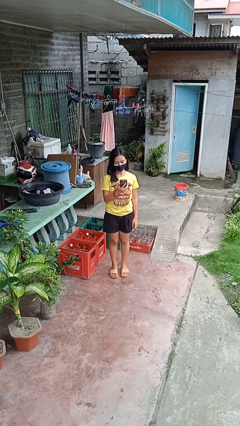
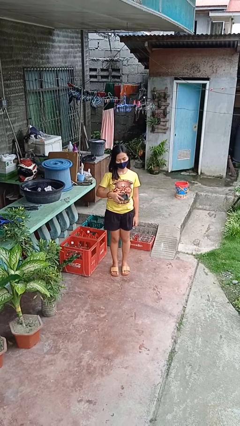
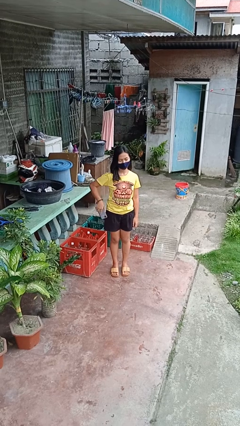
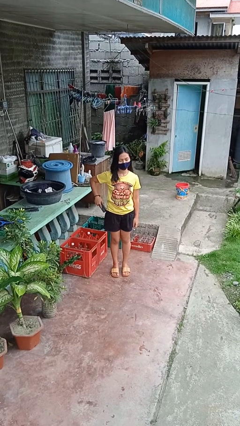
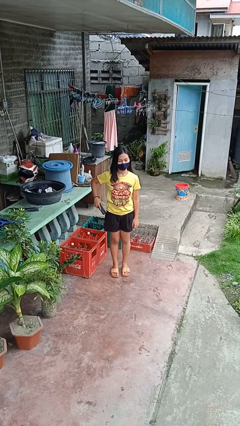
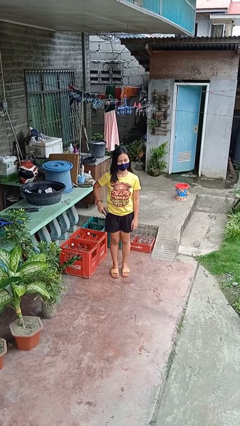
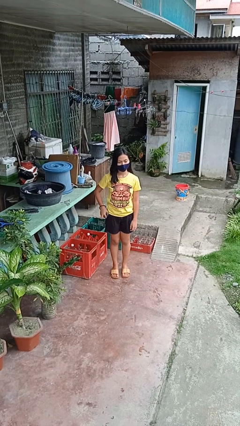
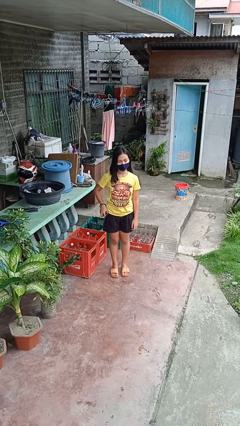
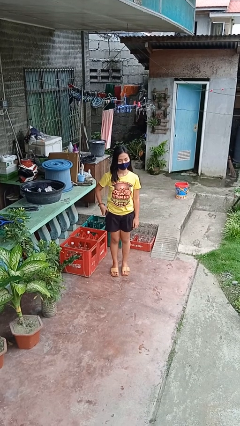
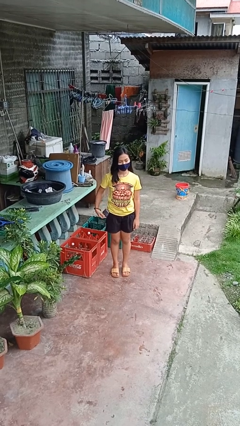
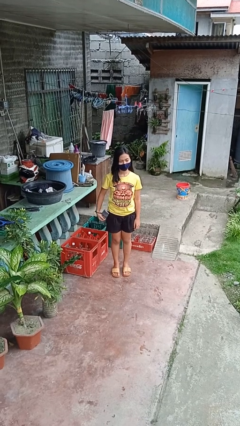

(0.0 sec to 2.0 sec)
person puts phone into pocket

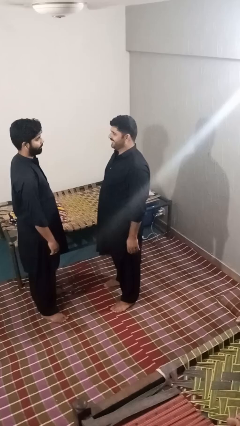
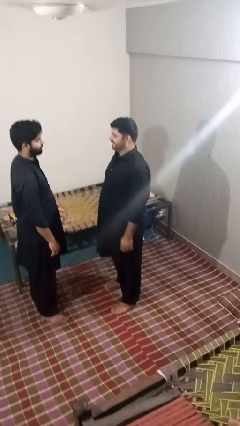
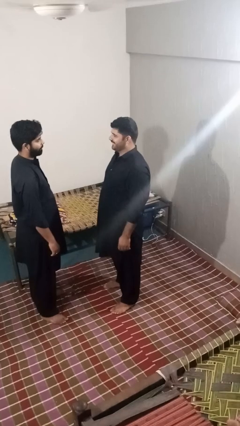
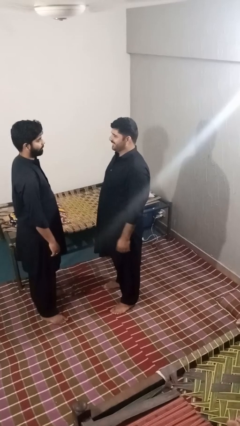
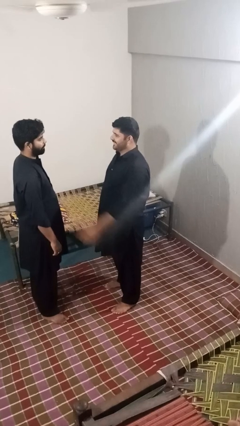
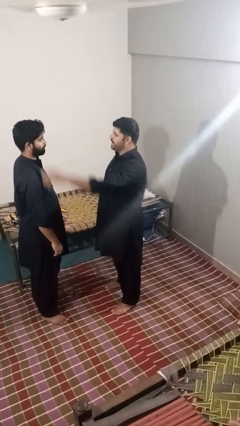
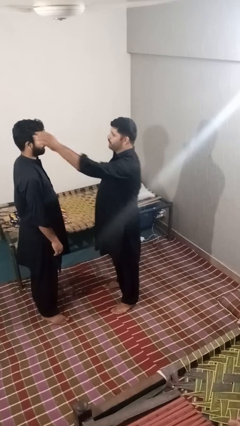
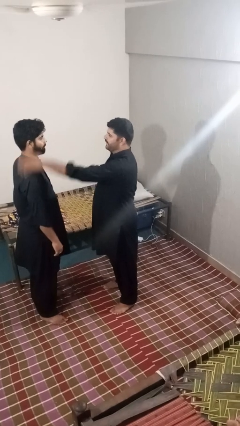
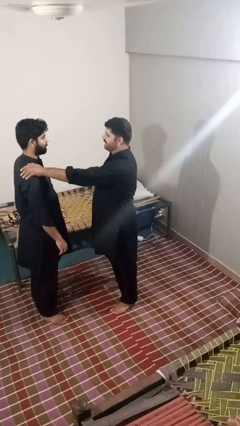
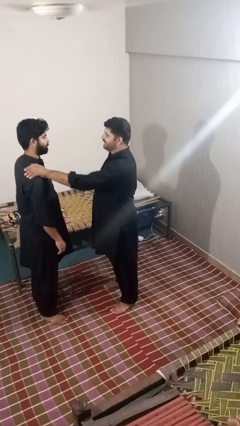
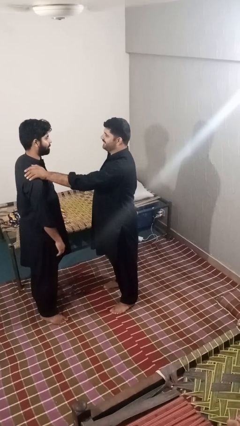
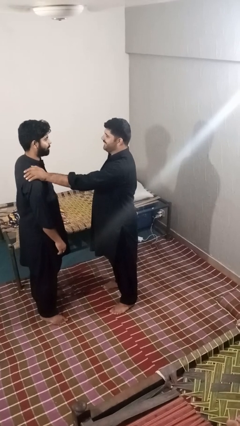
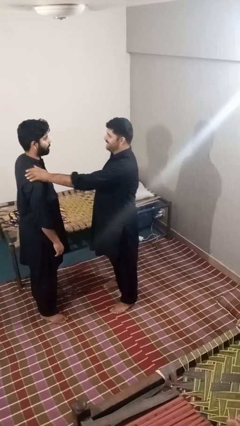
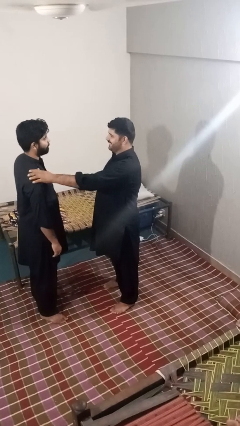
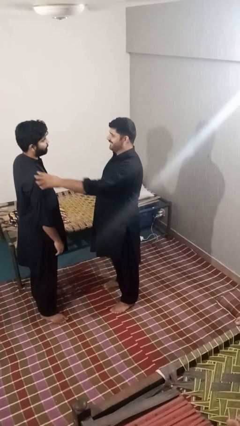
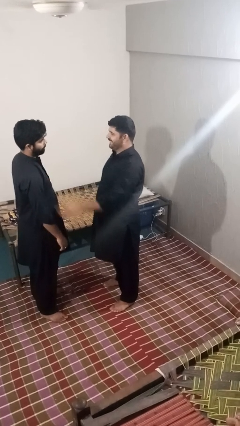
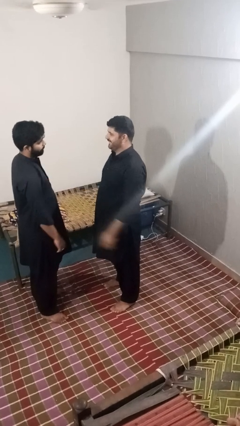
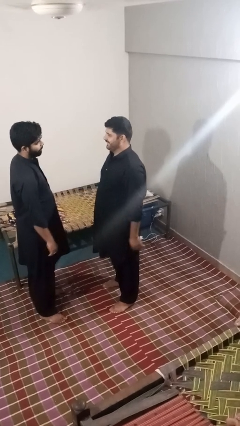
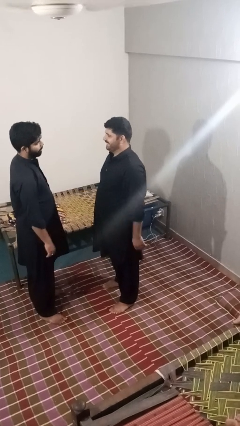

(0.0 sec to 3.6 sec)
person pounds shoulders of person

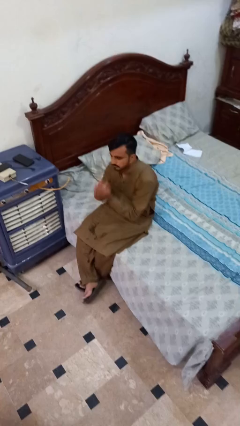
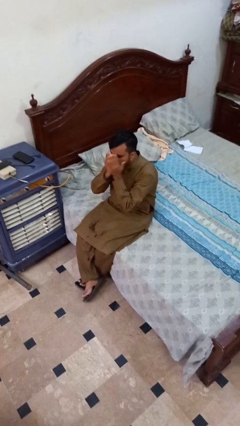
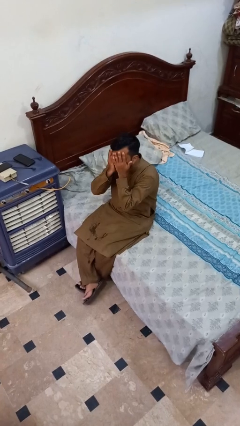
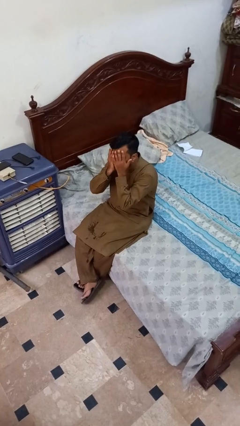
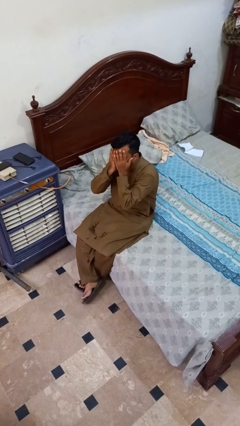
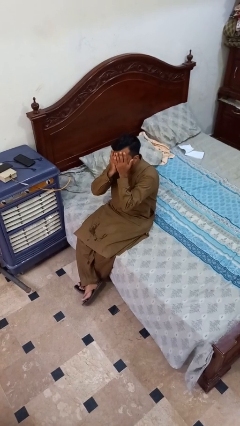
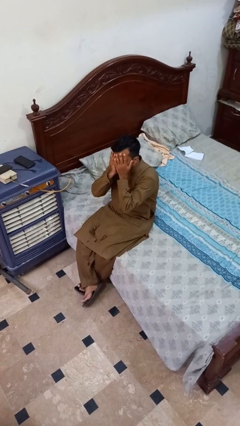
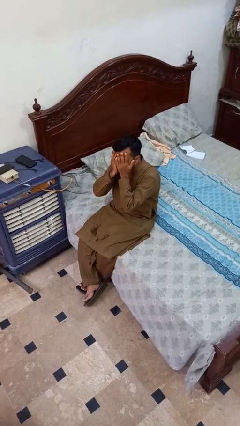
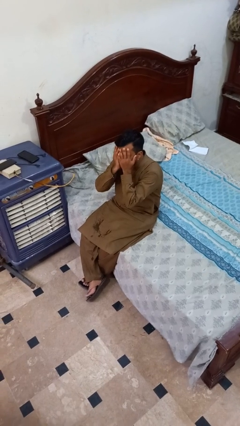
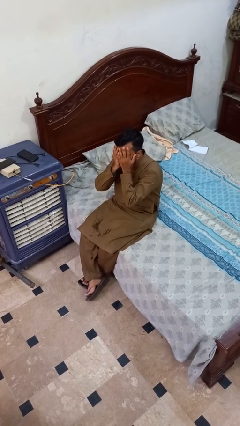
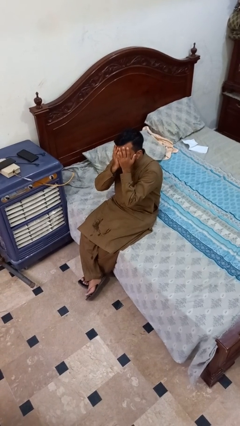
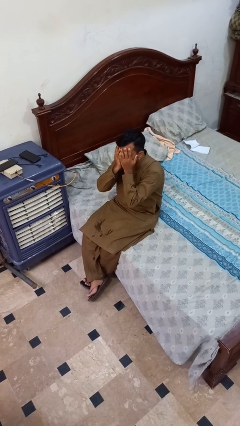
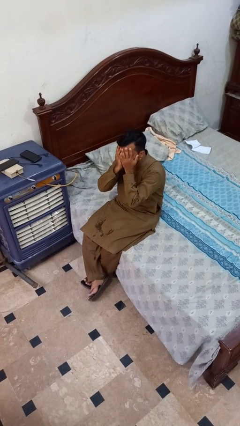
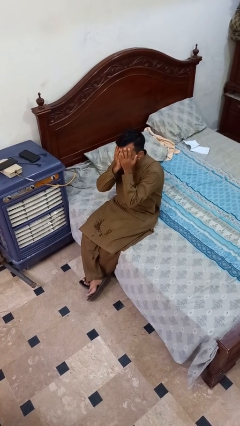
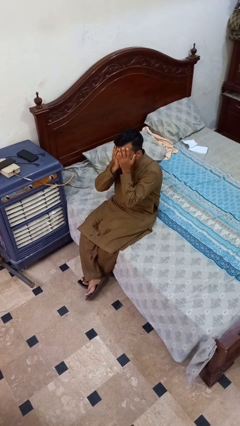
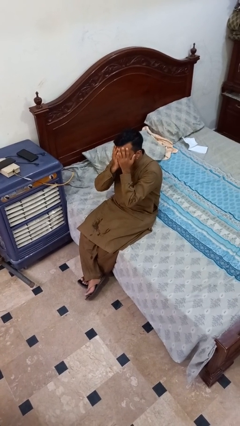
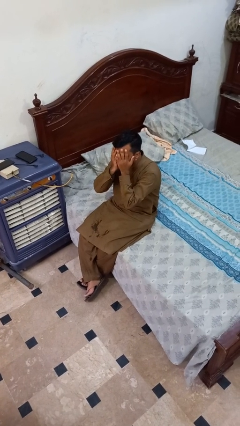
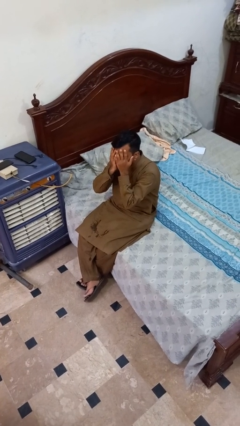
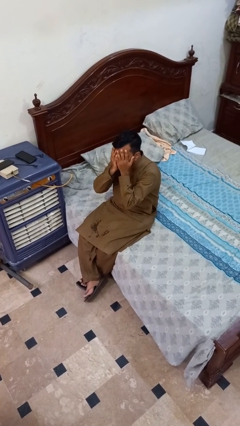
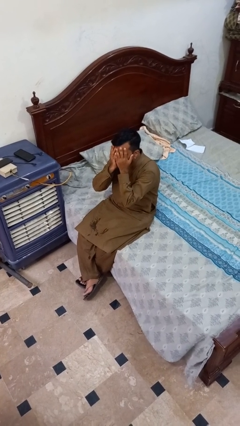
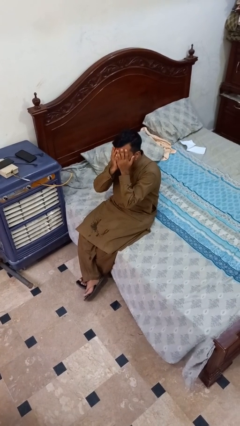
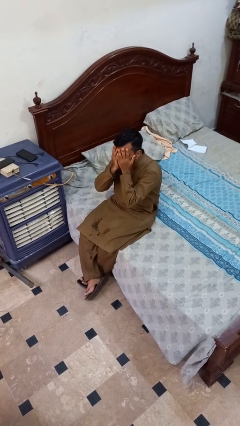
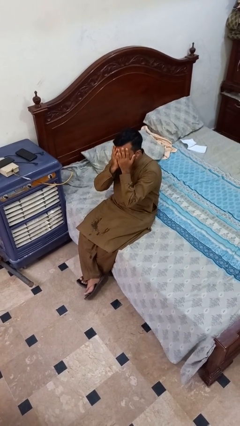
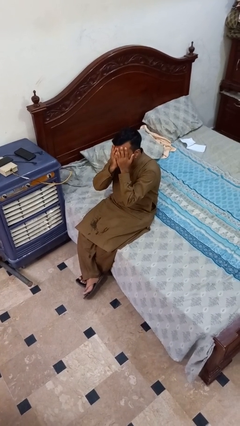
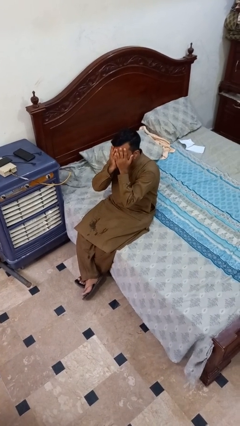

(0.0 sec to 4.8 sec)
person covers face with hands

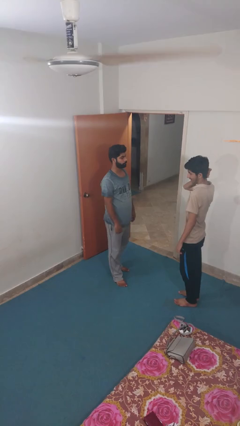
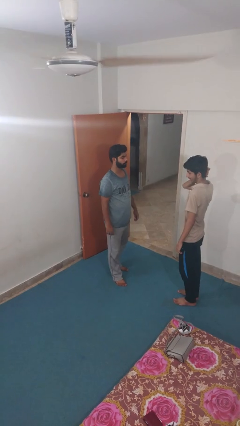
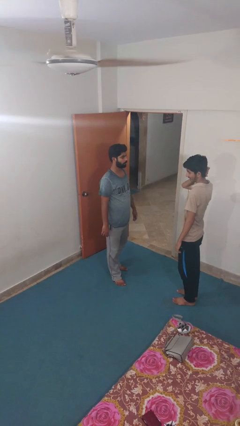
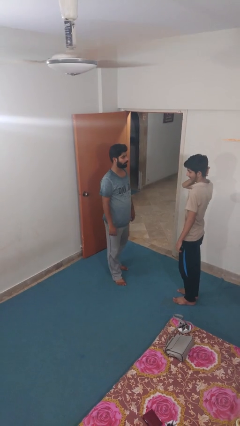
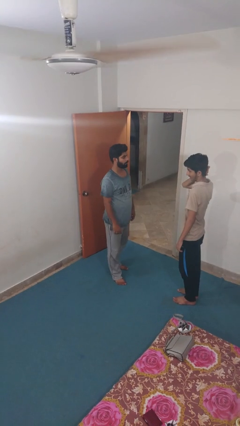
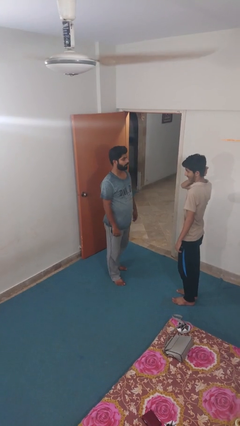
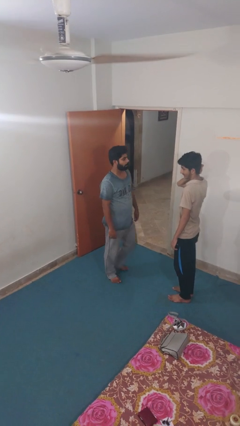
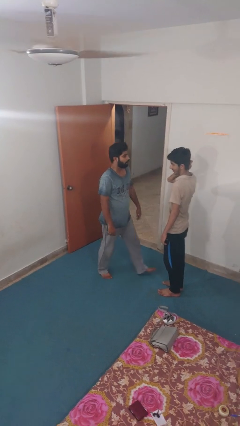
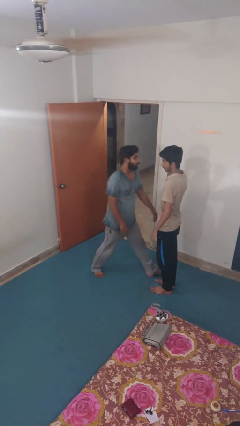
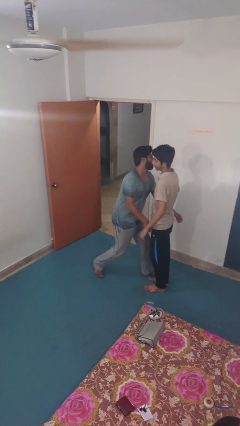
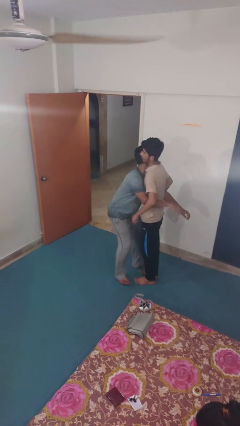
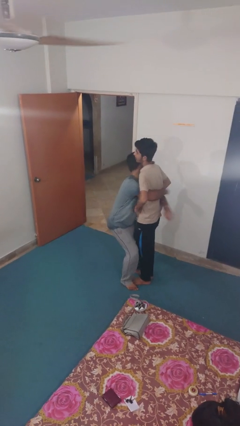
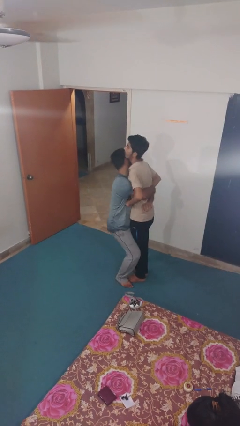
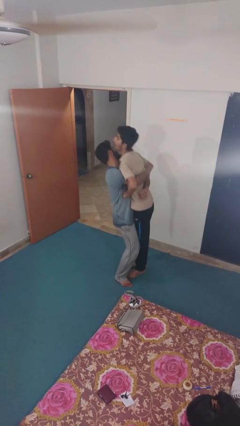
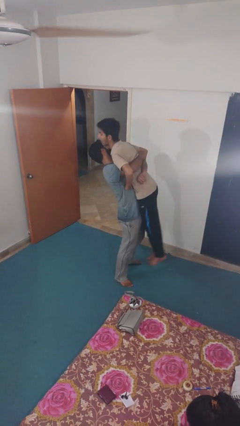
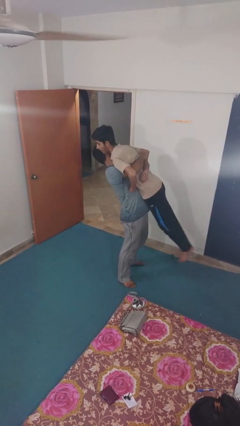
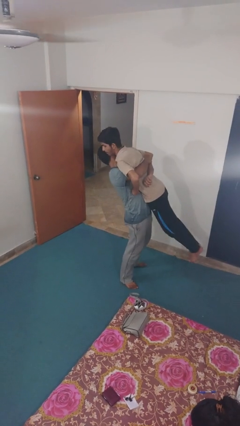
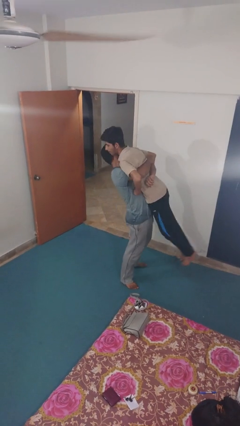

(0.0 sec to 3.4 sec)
person picks up person

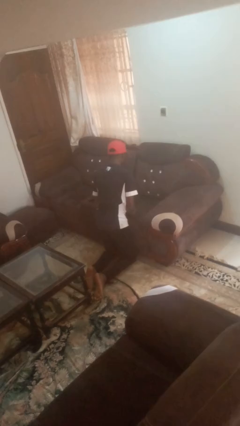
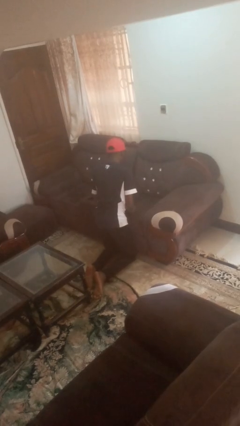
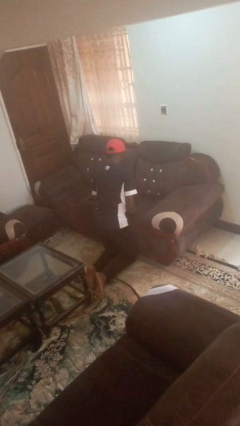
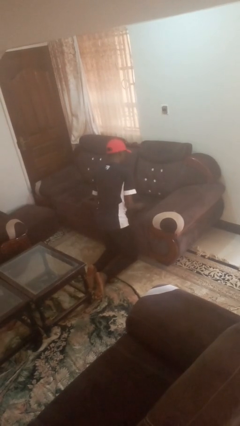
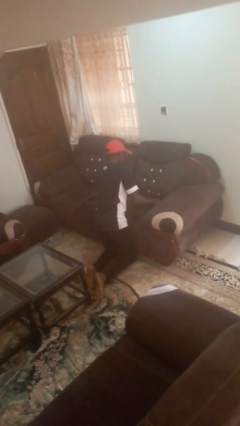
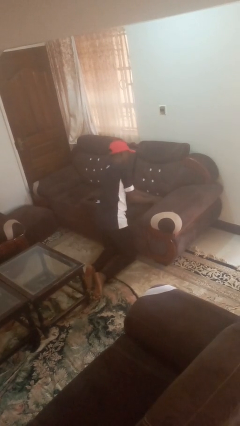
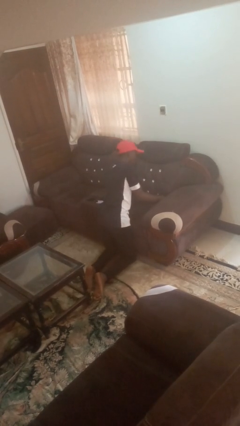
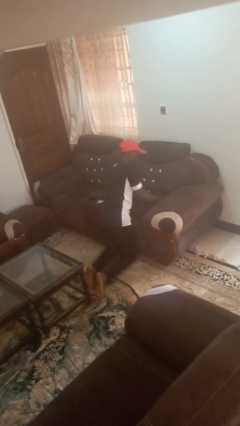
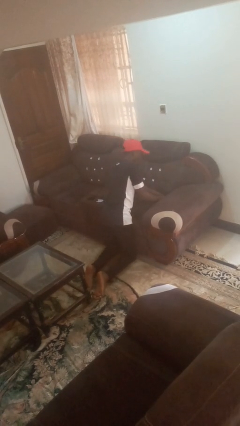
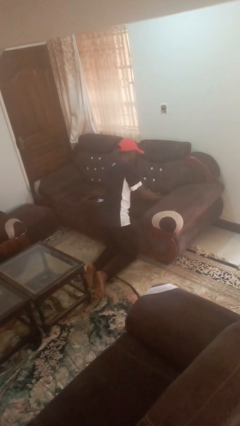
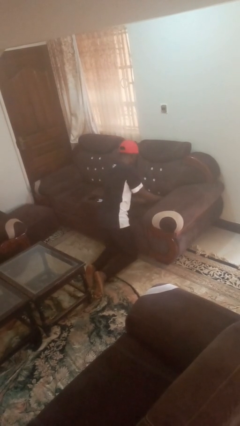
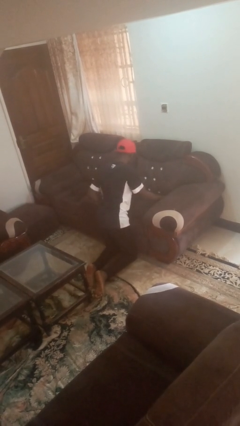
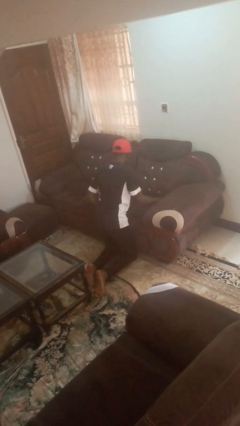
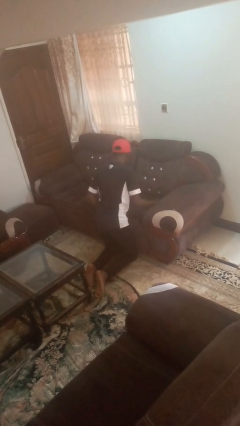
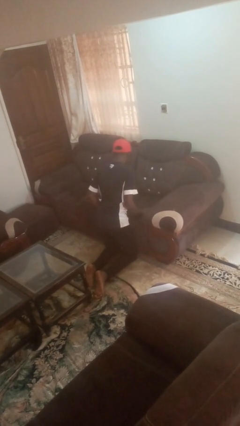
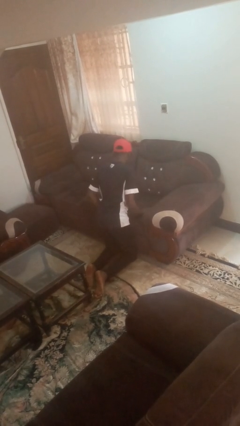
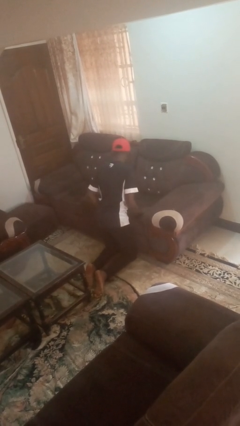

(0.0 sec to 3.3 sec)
person searches in couch

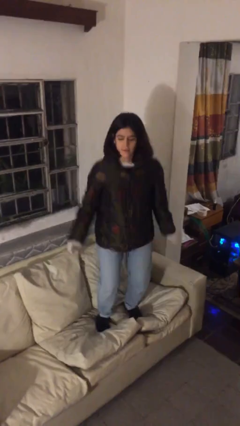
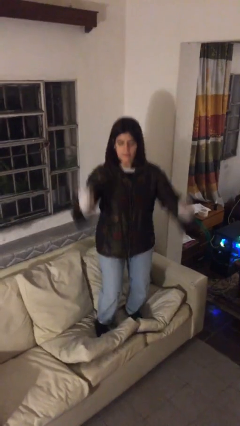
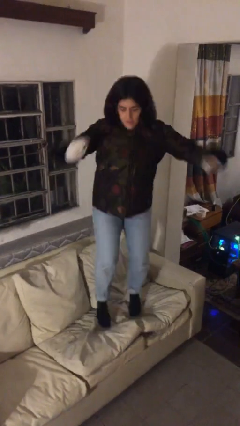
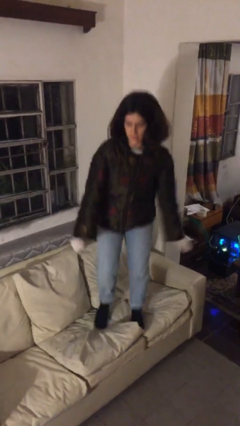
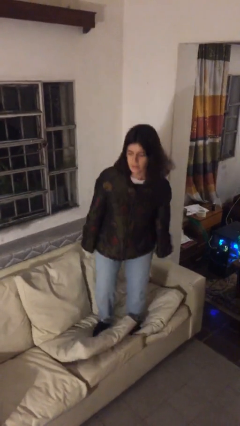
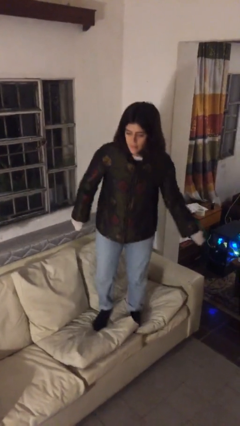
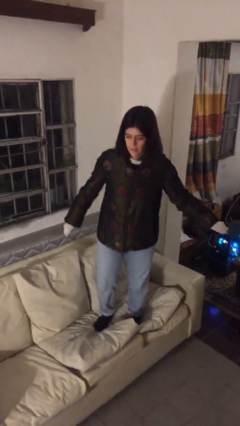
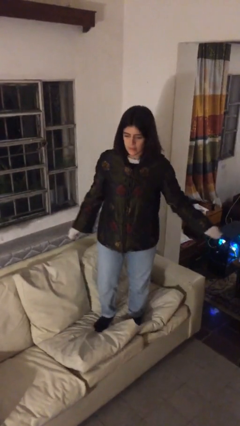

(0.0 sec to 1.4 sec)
person jumps on couch
